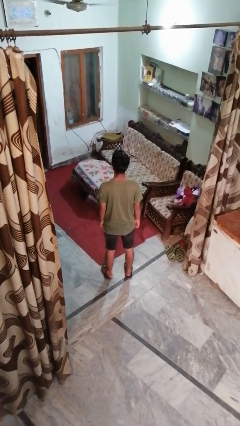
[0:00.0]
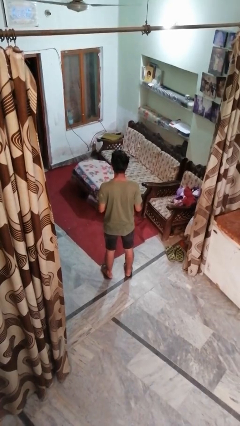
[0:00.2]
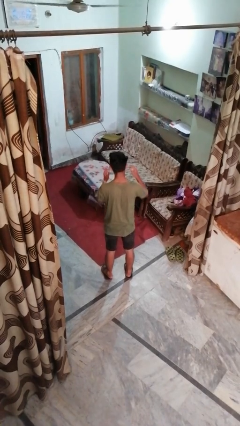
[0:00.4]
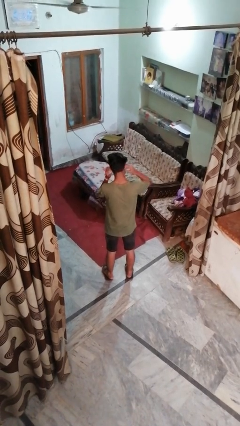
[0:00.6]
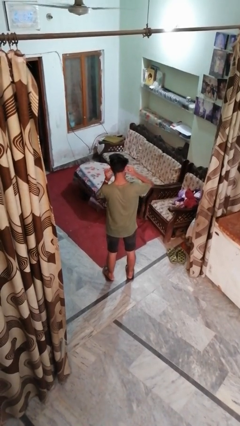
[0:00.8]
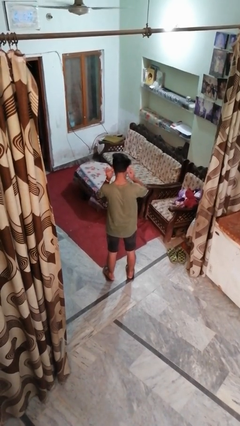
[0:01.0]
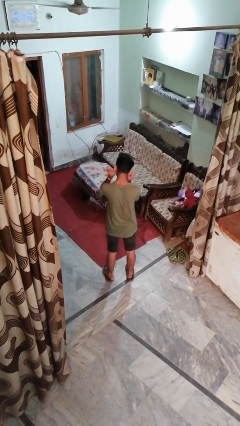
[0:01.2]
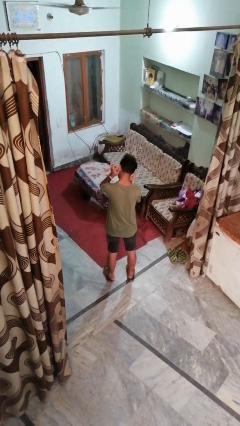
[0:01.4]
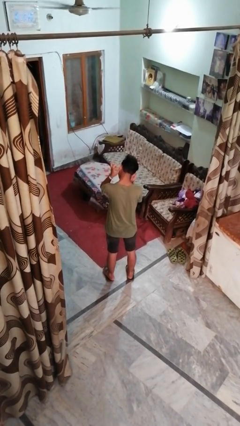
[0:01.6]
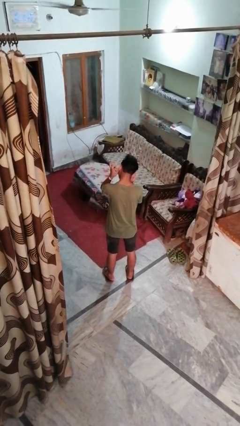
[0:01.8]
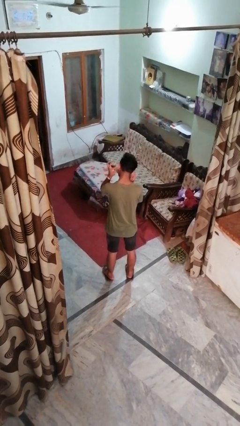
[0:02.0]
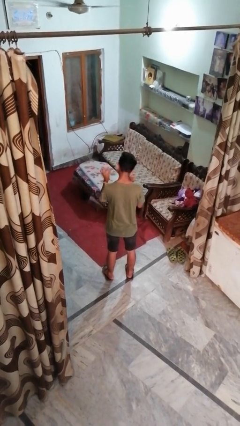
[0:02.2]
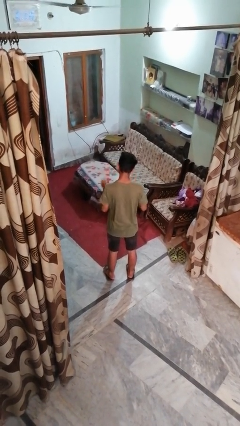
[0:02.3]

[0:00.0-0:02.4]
person touches earlobe

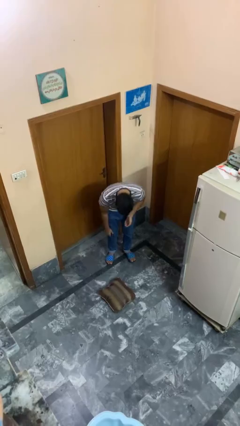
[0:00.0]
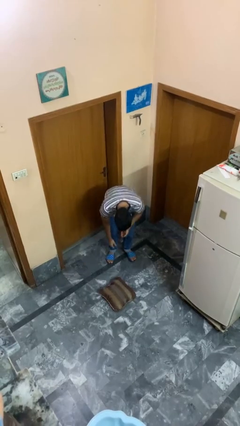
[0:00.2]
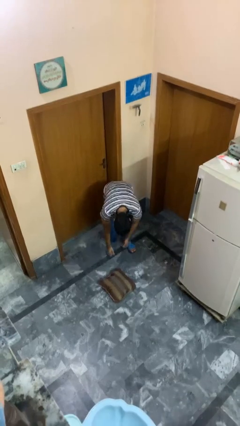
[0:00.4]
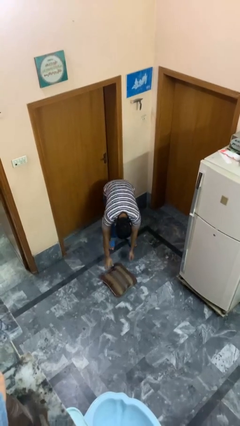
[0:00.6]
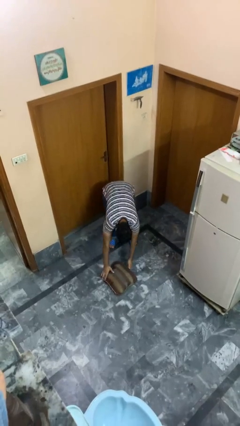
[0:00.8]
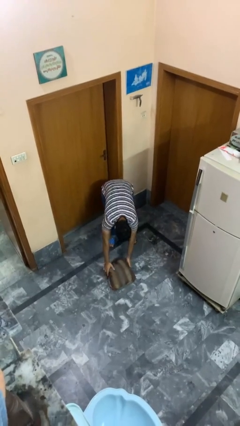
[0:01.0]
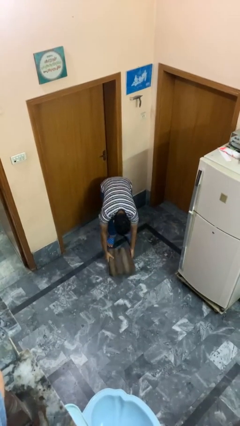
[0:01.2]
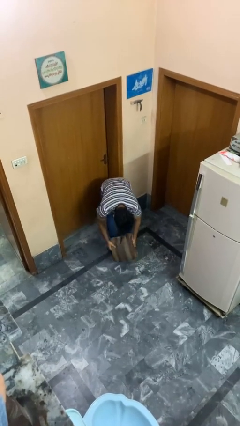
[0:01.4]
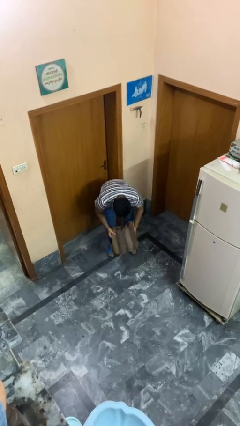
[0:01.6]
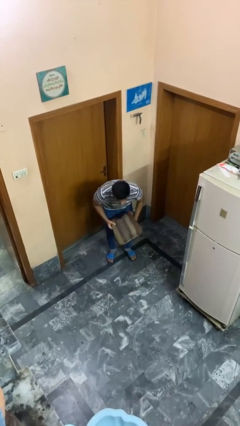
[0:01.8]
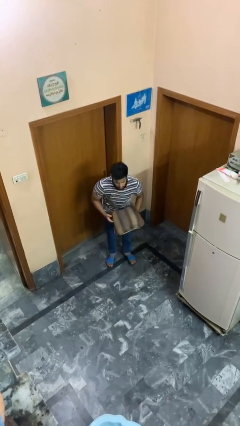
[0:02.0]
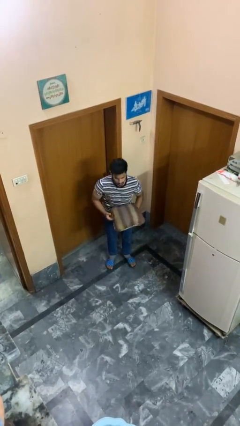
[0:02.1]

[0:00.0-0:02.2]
person picks up object from floor

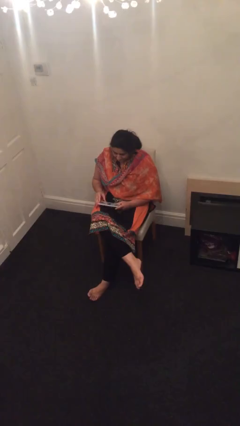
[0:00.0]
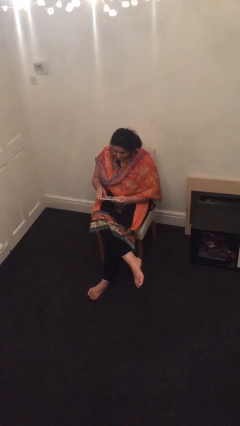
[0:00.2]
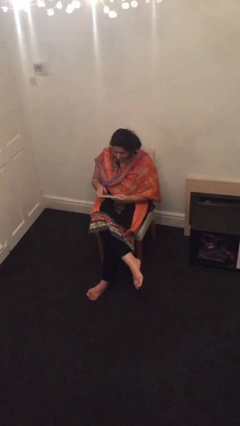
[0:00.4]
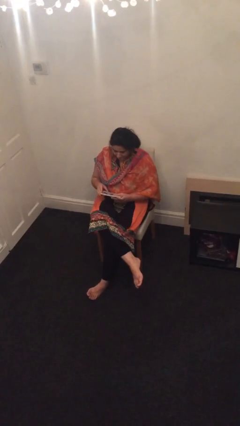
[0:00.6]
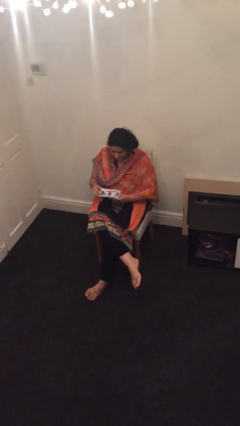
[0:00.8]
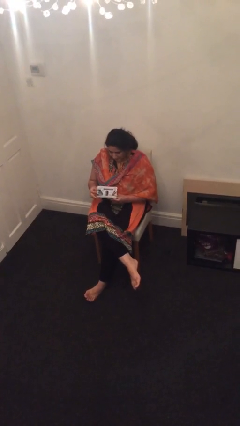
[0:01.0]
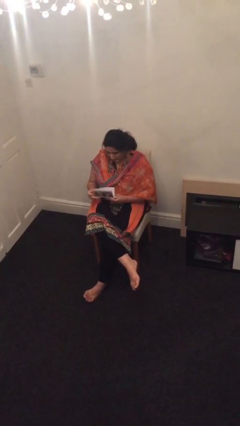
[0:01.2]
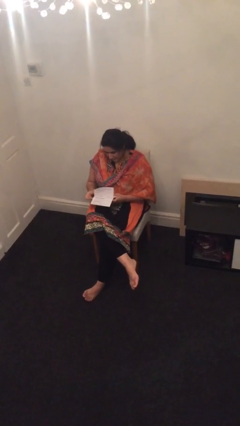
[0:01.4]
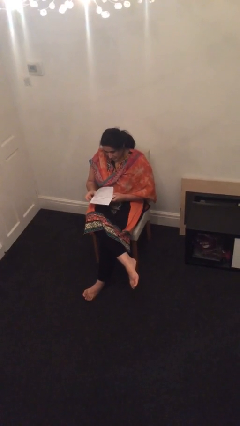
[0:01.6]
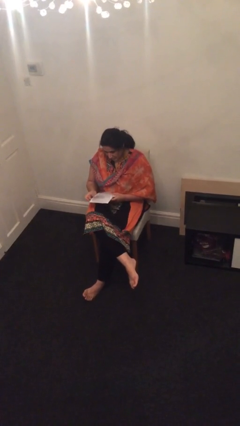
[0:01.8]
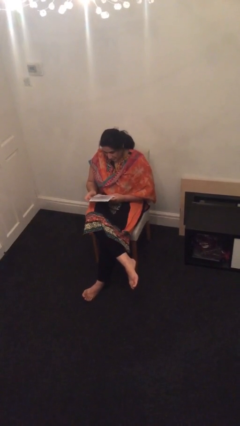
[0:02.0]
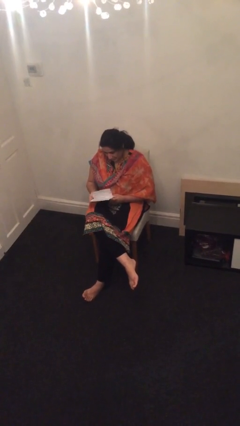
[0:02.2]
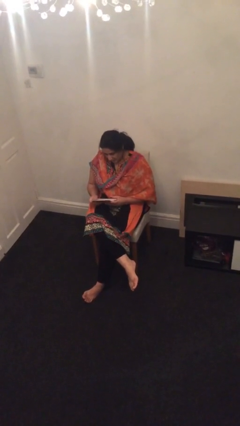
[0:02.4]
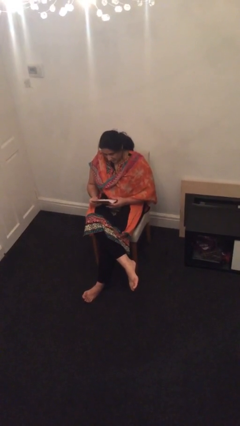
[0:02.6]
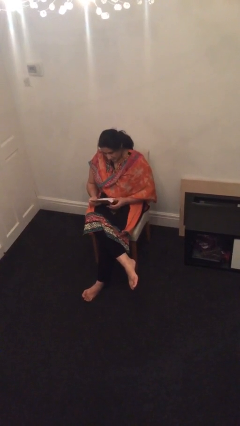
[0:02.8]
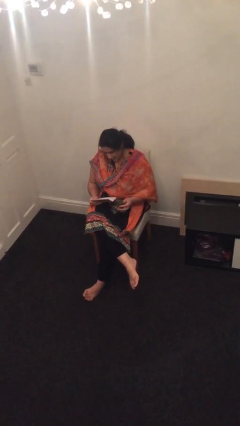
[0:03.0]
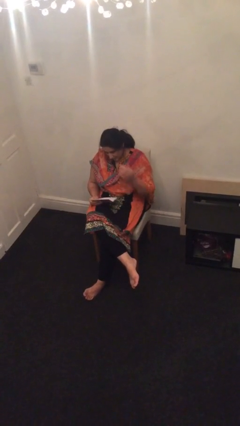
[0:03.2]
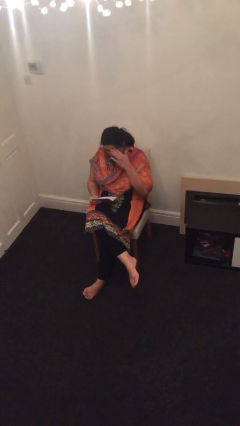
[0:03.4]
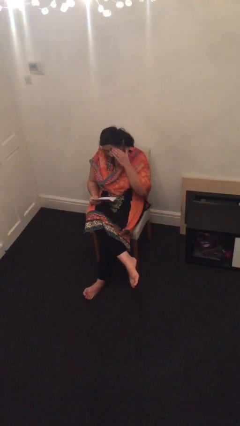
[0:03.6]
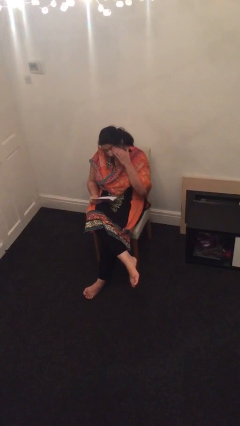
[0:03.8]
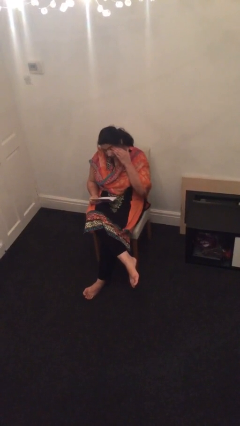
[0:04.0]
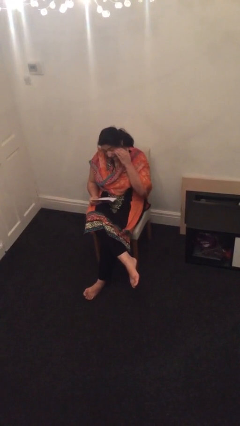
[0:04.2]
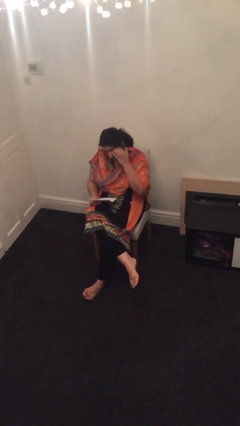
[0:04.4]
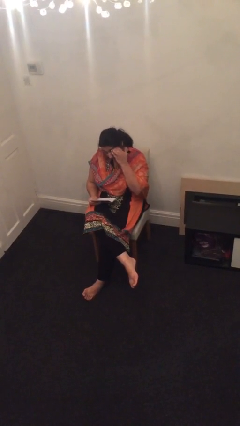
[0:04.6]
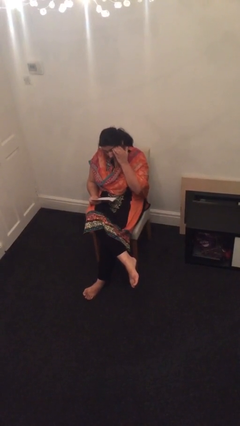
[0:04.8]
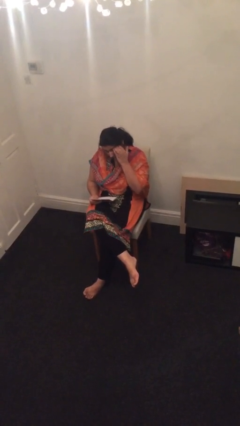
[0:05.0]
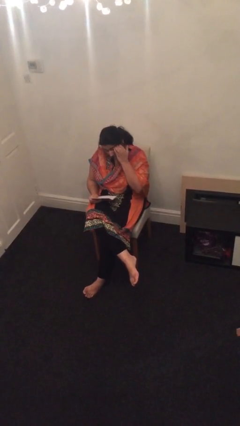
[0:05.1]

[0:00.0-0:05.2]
person reads document

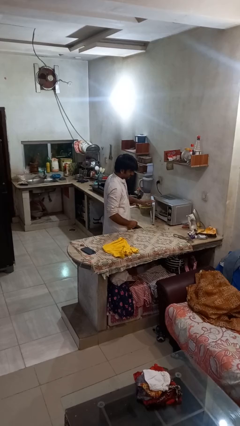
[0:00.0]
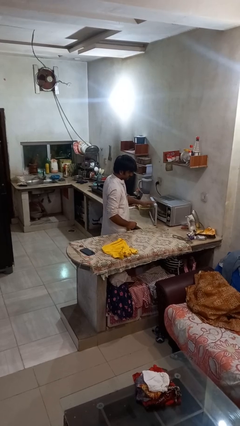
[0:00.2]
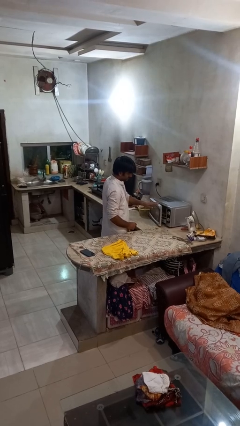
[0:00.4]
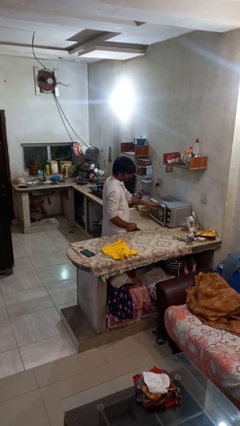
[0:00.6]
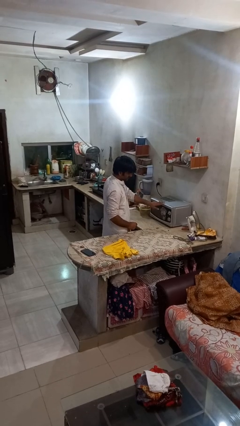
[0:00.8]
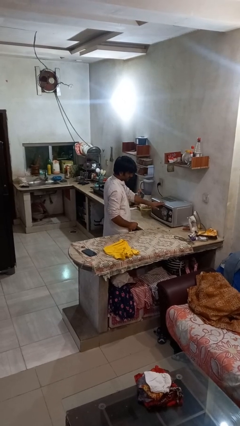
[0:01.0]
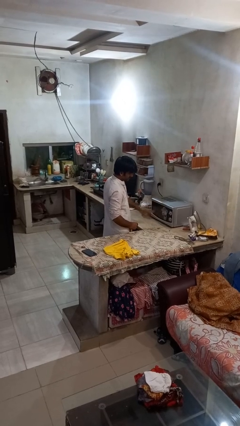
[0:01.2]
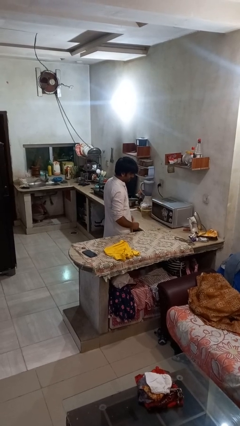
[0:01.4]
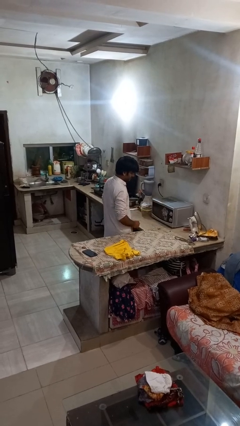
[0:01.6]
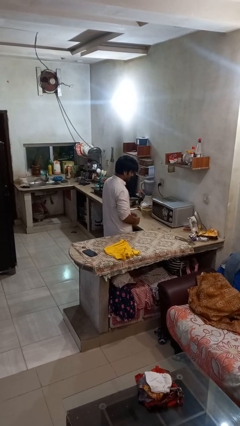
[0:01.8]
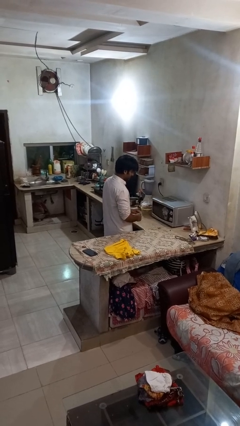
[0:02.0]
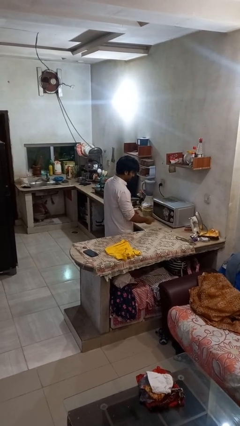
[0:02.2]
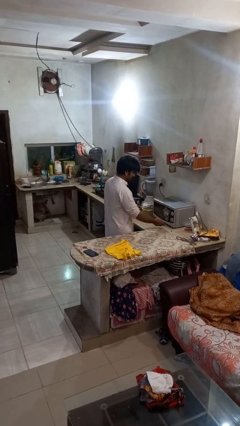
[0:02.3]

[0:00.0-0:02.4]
person closes microwave

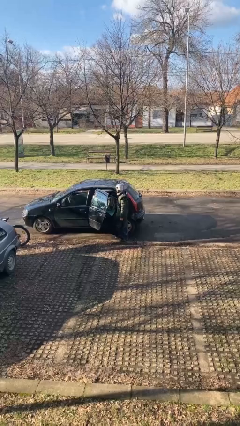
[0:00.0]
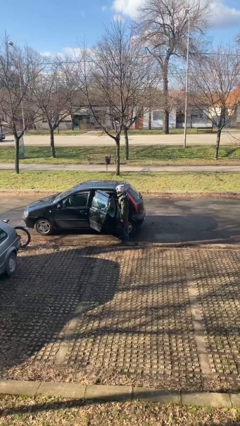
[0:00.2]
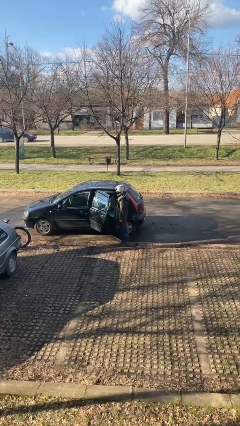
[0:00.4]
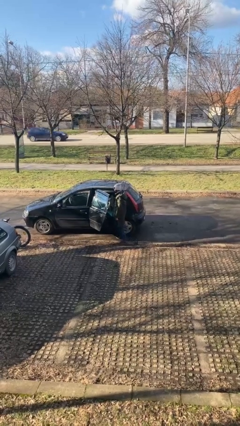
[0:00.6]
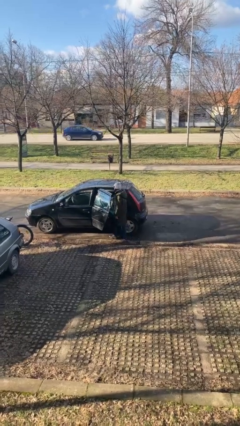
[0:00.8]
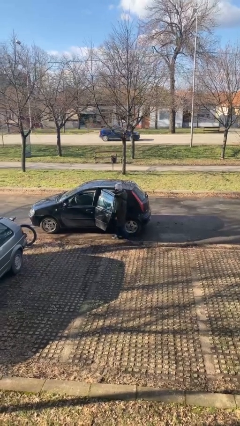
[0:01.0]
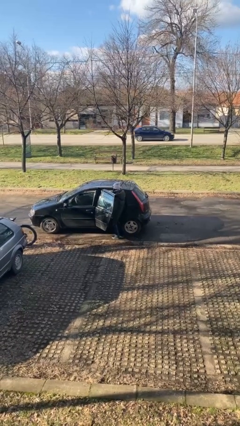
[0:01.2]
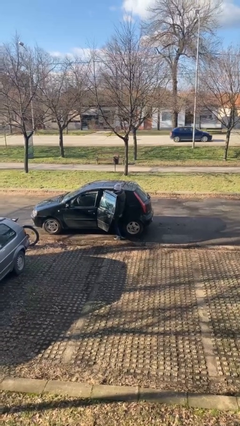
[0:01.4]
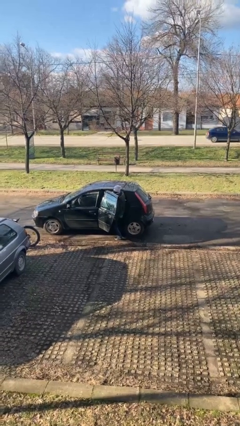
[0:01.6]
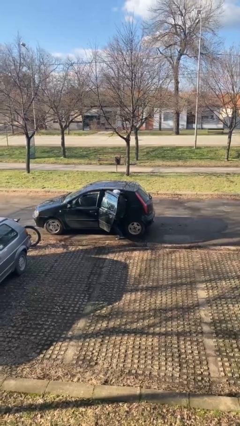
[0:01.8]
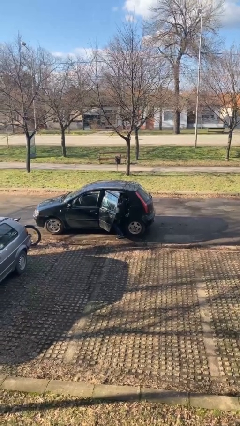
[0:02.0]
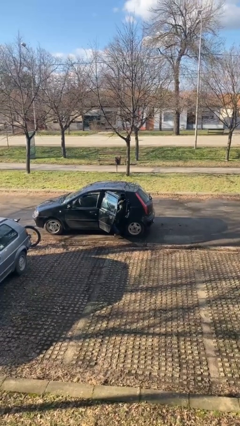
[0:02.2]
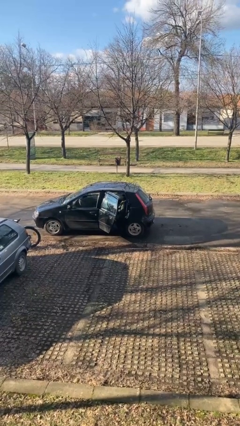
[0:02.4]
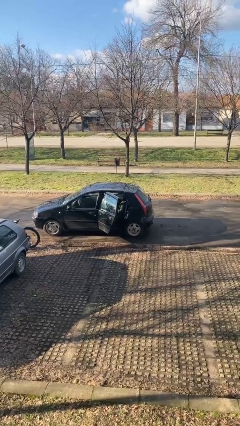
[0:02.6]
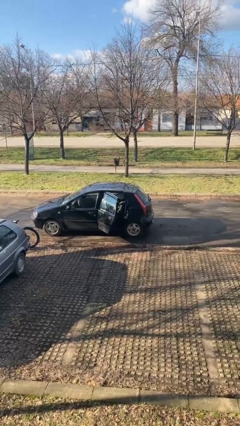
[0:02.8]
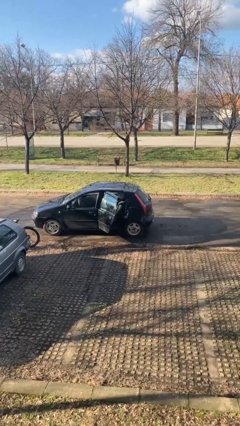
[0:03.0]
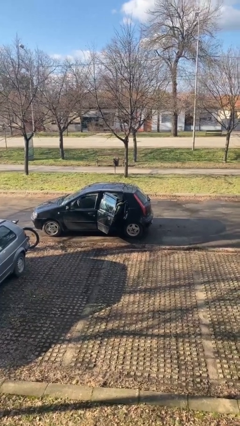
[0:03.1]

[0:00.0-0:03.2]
person enters car

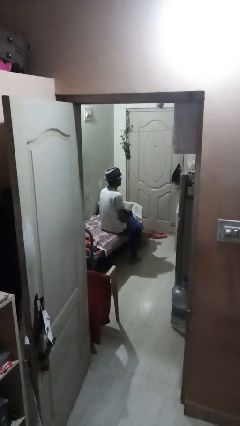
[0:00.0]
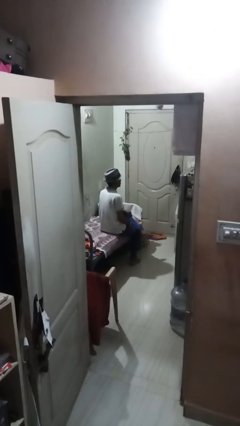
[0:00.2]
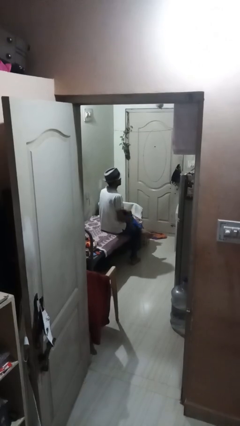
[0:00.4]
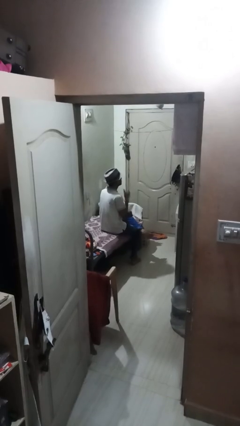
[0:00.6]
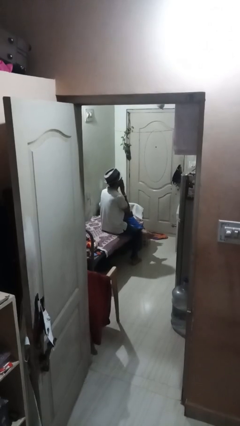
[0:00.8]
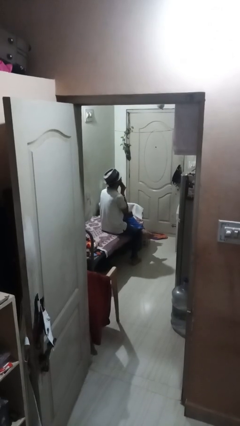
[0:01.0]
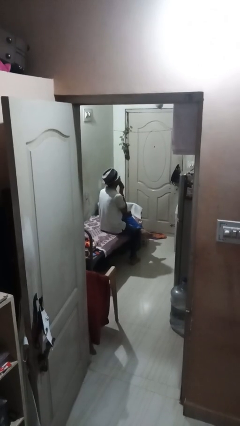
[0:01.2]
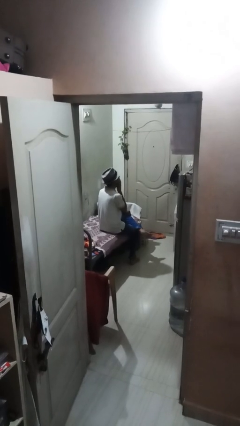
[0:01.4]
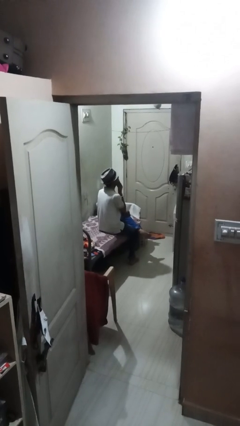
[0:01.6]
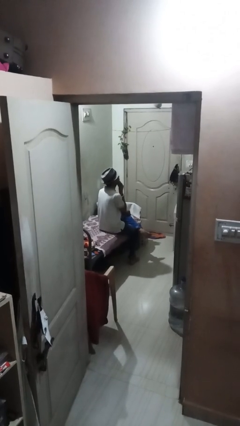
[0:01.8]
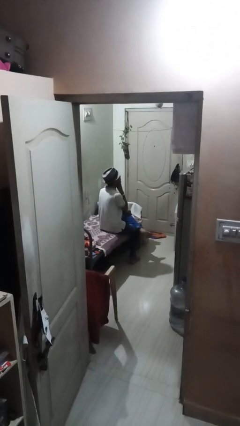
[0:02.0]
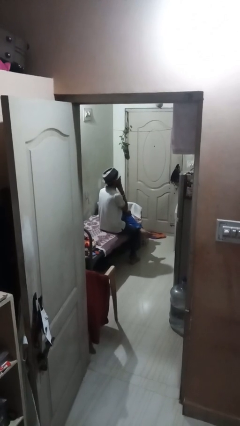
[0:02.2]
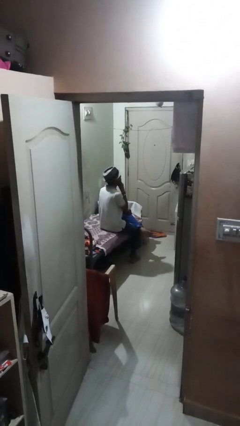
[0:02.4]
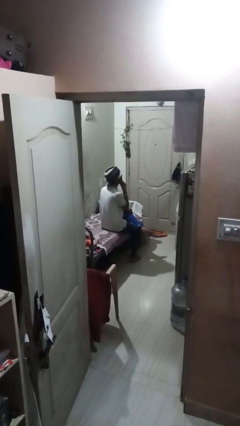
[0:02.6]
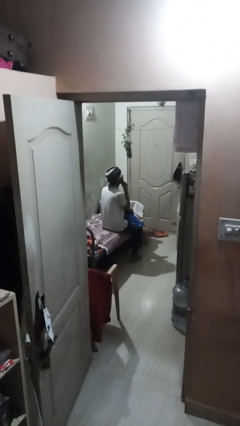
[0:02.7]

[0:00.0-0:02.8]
person strokes chin
